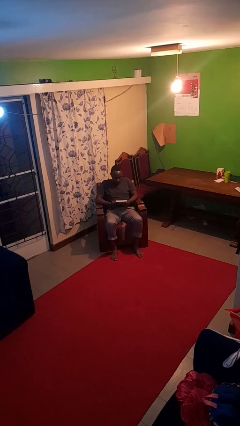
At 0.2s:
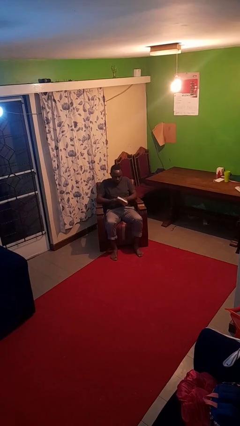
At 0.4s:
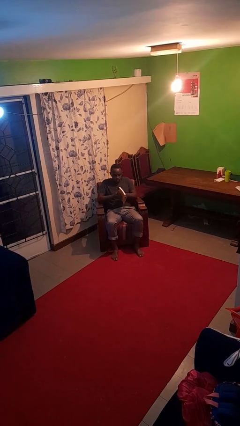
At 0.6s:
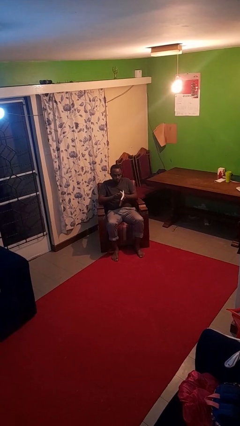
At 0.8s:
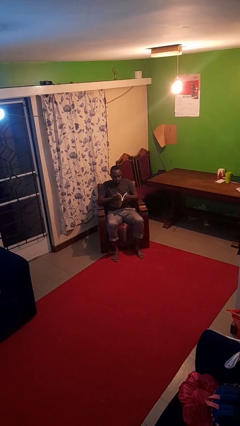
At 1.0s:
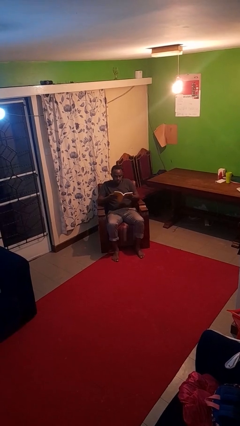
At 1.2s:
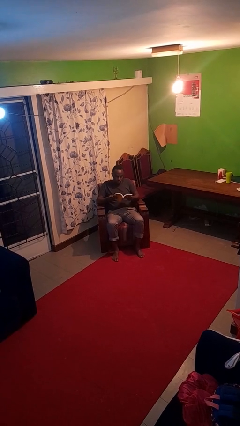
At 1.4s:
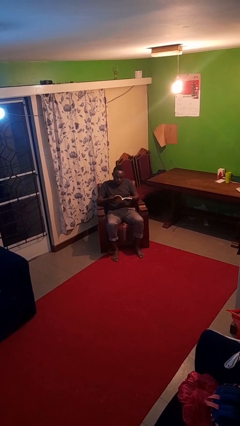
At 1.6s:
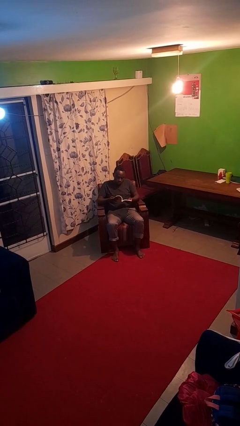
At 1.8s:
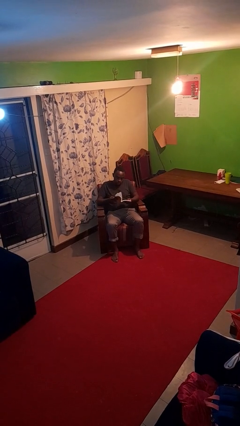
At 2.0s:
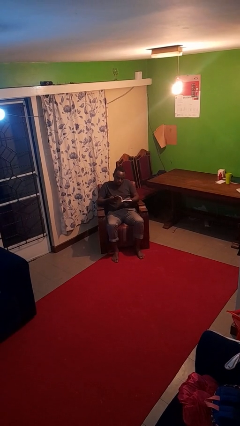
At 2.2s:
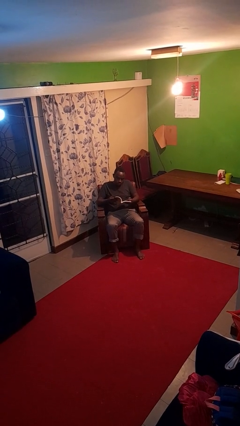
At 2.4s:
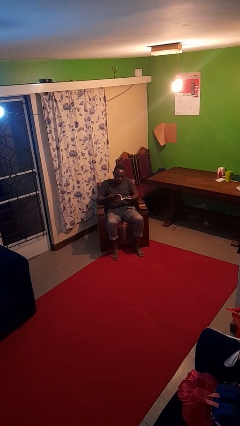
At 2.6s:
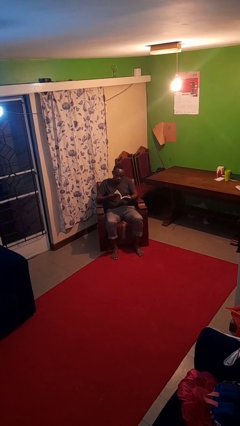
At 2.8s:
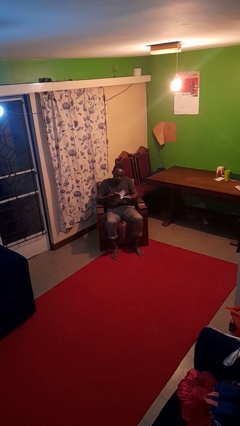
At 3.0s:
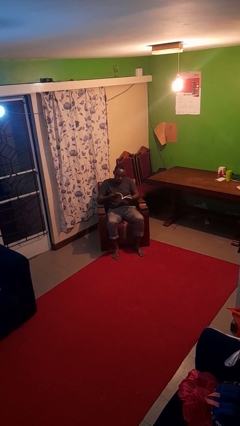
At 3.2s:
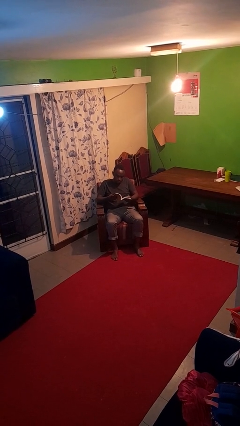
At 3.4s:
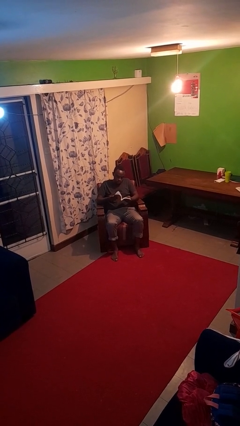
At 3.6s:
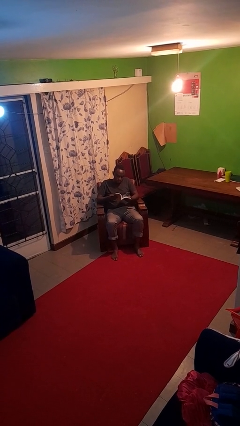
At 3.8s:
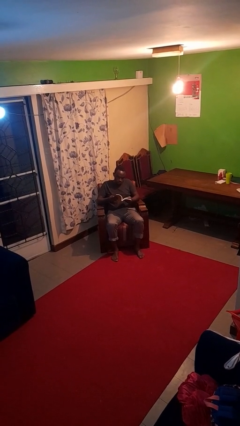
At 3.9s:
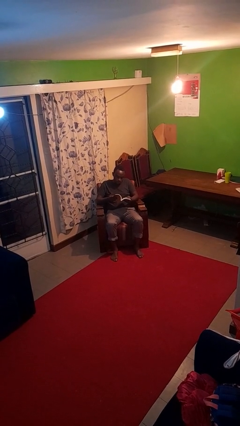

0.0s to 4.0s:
person reads book

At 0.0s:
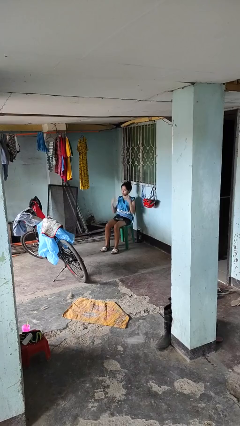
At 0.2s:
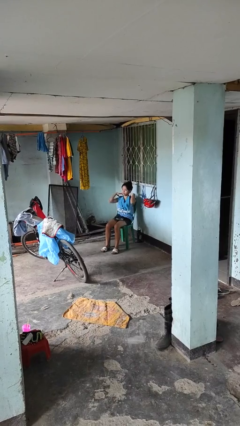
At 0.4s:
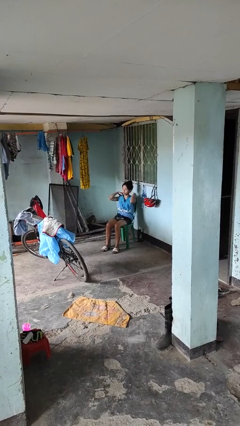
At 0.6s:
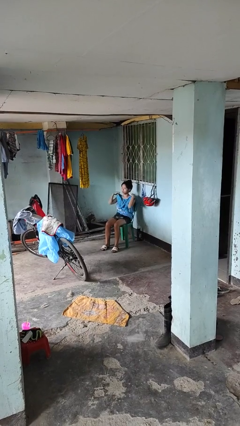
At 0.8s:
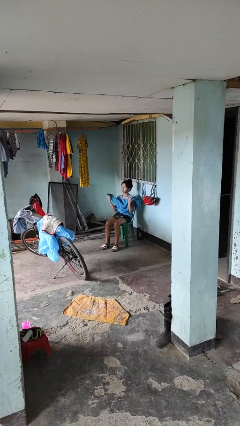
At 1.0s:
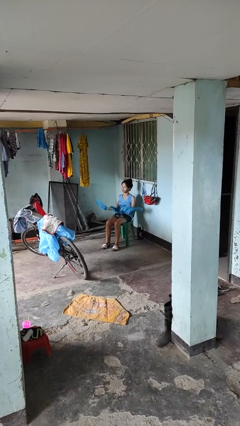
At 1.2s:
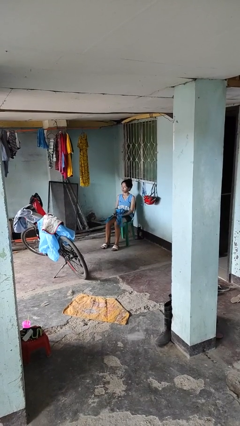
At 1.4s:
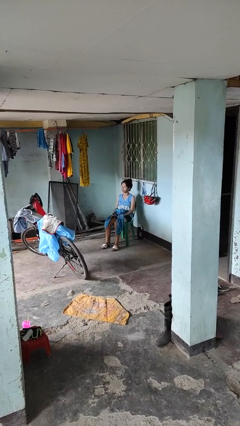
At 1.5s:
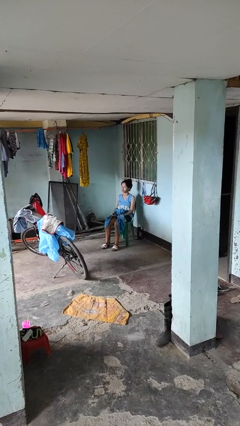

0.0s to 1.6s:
person takes off scarf

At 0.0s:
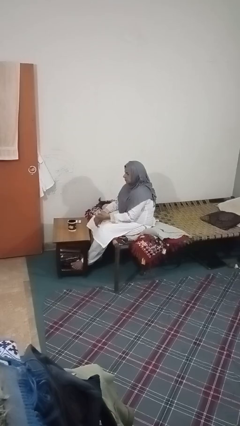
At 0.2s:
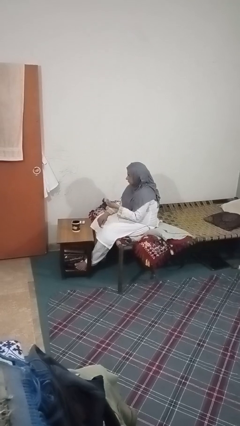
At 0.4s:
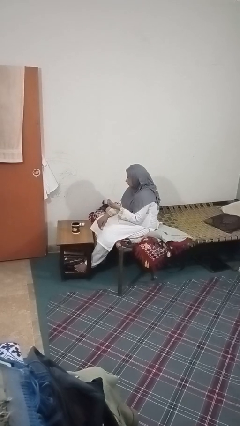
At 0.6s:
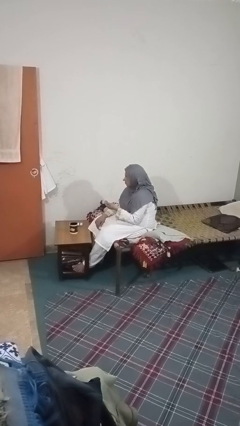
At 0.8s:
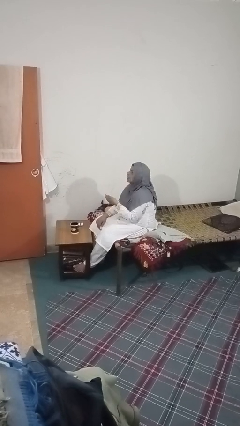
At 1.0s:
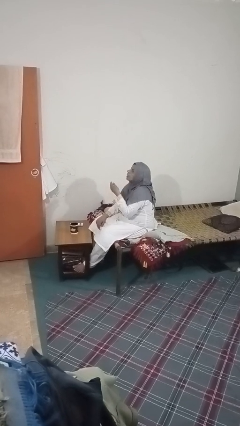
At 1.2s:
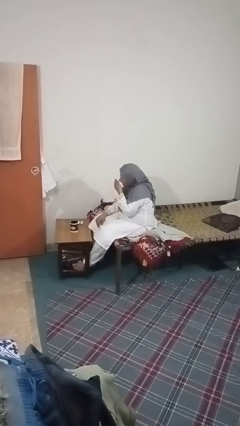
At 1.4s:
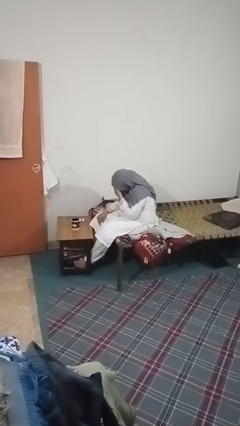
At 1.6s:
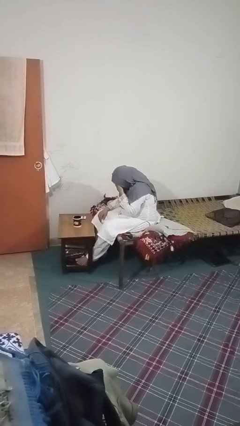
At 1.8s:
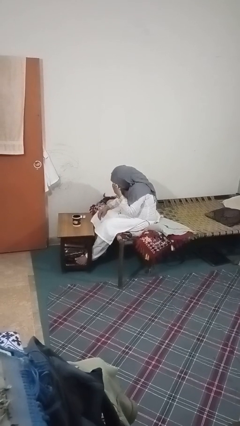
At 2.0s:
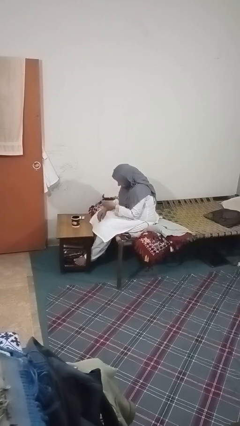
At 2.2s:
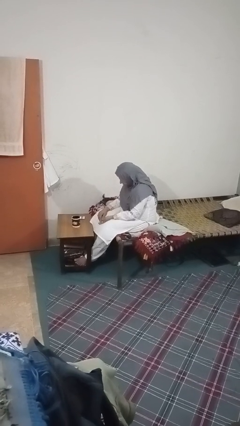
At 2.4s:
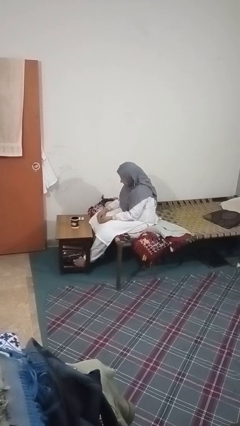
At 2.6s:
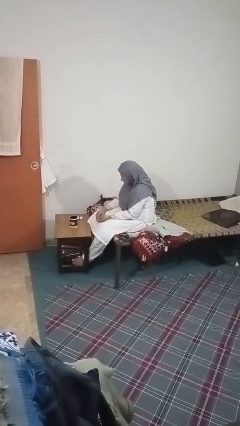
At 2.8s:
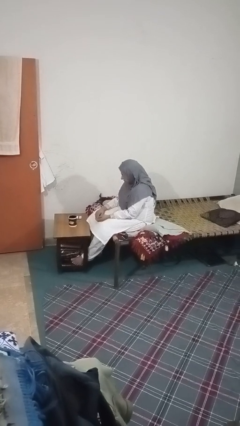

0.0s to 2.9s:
person sneezes into hand

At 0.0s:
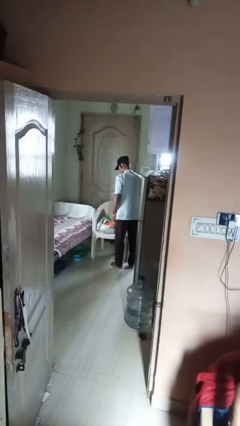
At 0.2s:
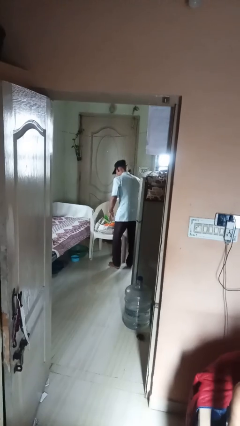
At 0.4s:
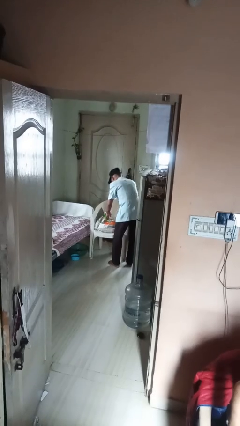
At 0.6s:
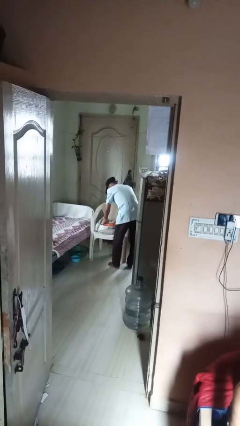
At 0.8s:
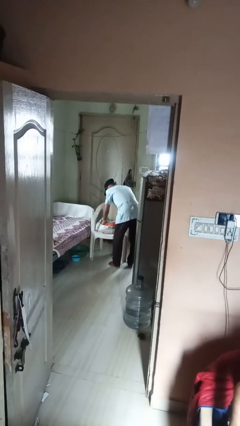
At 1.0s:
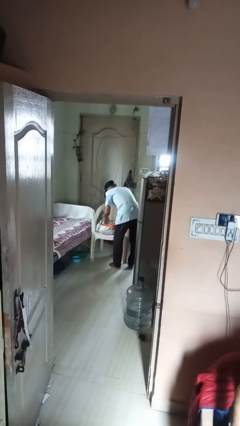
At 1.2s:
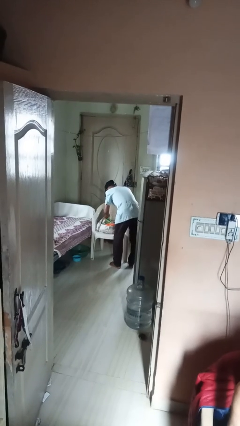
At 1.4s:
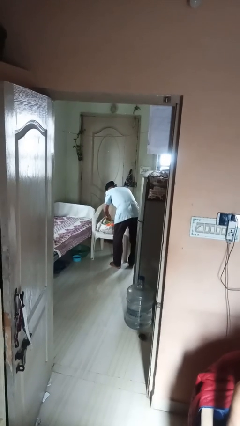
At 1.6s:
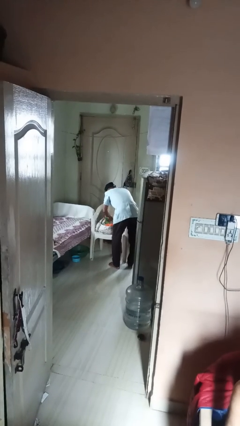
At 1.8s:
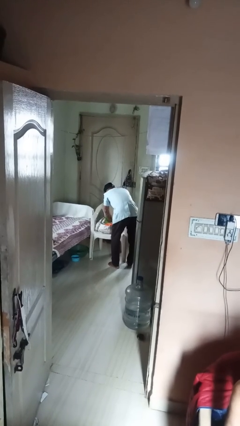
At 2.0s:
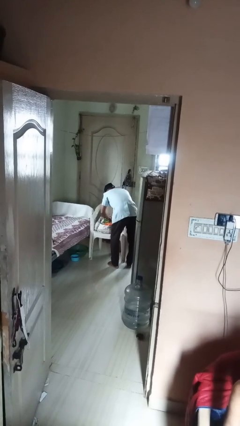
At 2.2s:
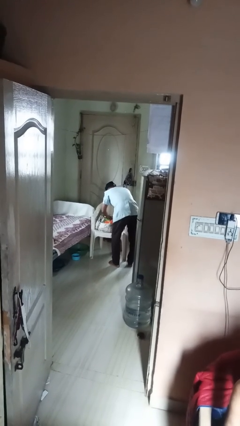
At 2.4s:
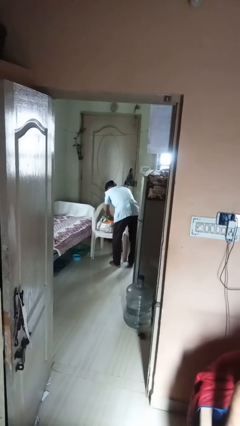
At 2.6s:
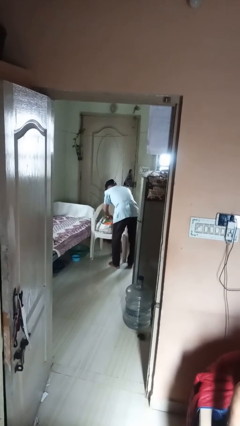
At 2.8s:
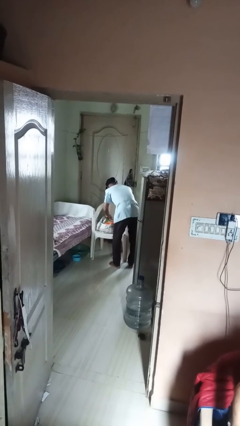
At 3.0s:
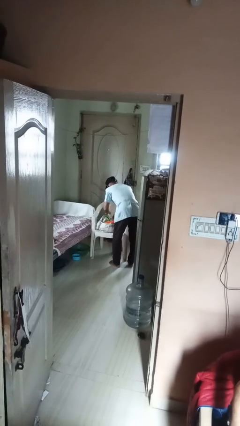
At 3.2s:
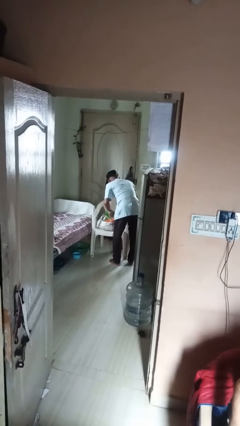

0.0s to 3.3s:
person searches in bag

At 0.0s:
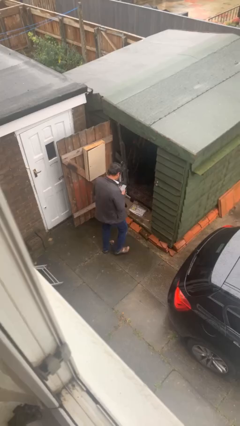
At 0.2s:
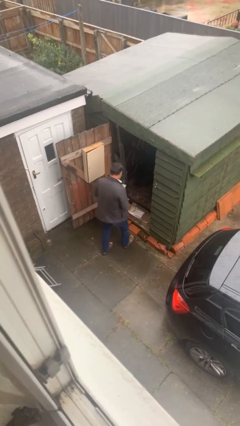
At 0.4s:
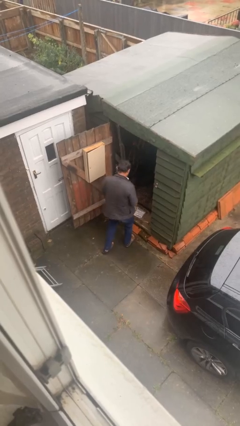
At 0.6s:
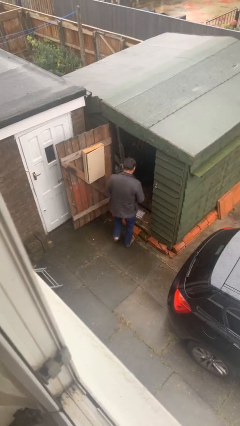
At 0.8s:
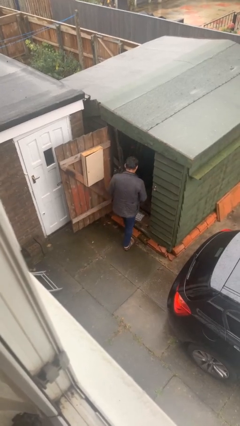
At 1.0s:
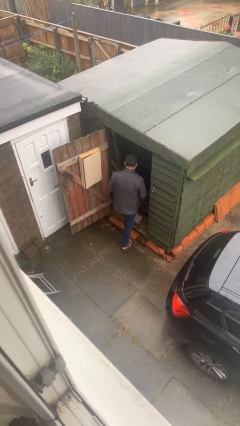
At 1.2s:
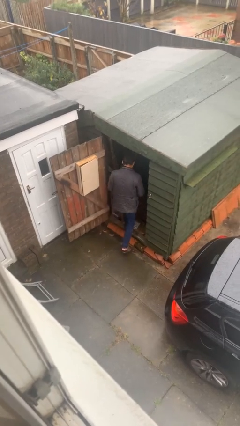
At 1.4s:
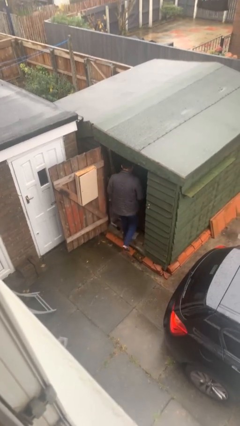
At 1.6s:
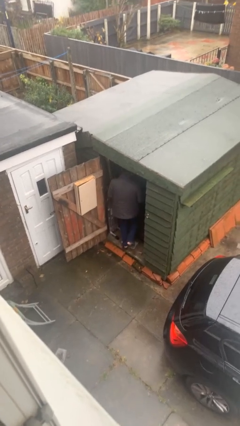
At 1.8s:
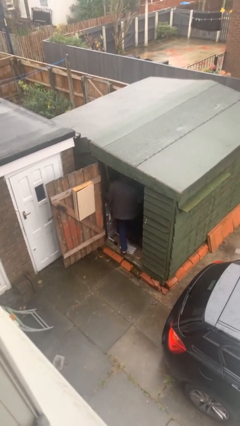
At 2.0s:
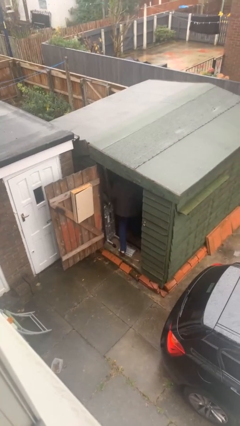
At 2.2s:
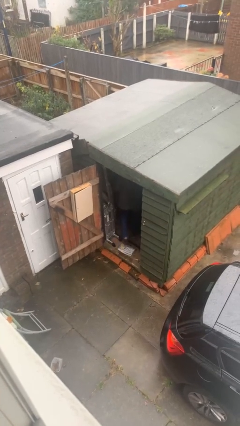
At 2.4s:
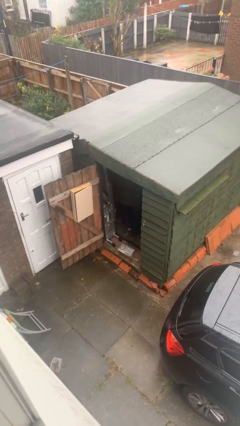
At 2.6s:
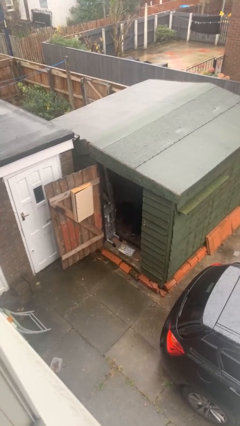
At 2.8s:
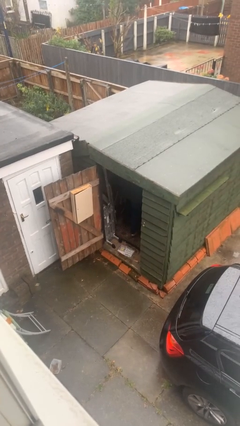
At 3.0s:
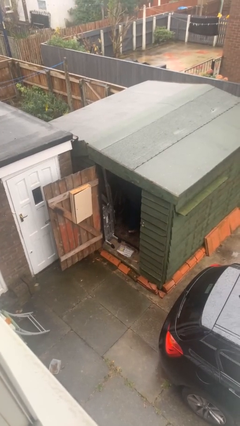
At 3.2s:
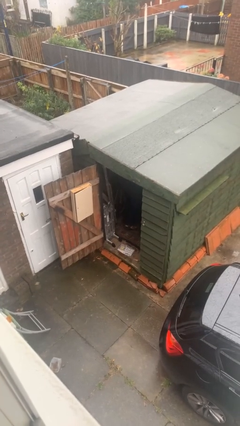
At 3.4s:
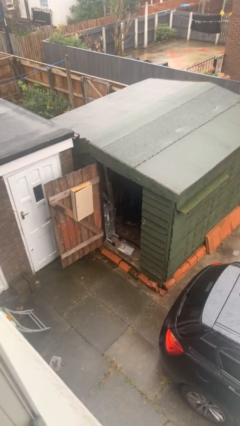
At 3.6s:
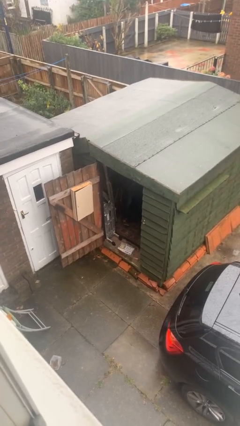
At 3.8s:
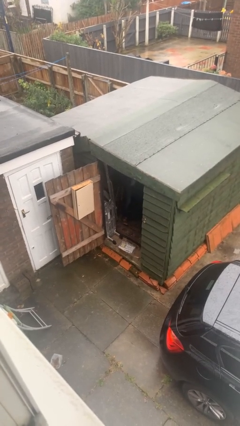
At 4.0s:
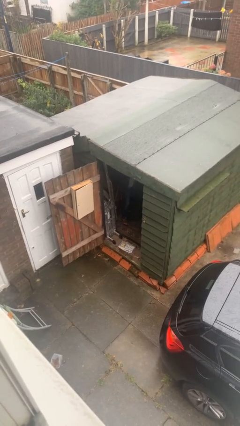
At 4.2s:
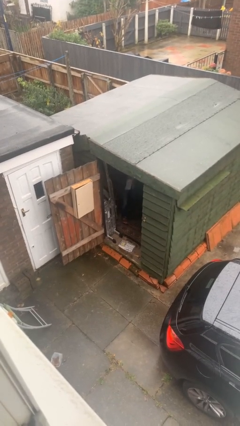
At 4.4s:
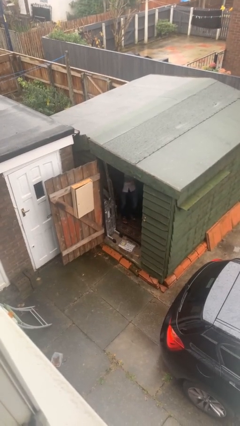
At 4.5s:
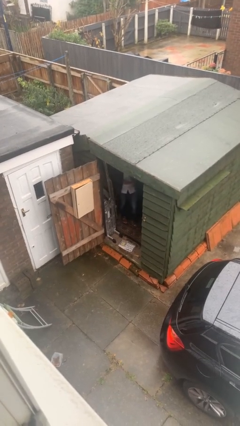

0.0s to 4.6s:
person exits scene through structure

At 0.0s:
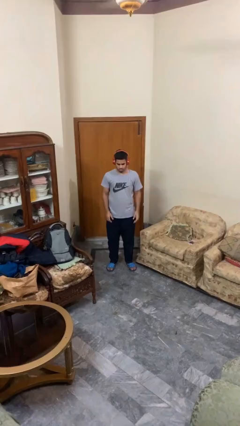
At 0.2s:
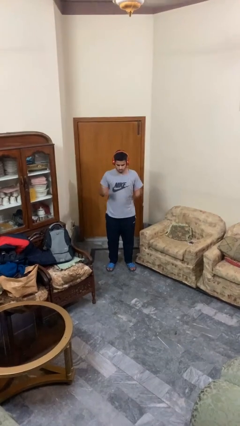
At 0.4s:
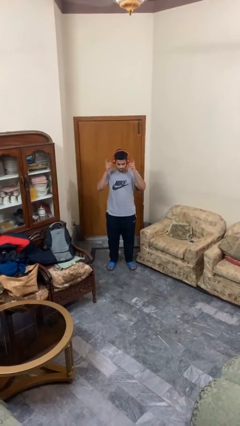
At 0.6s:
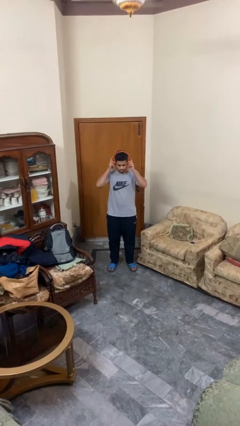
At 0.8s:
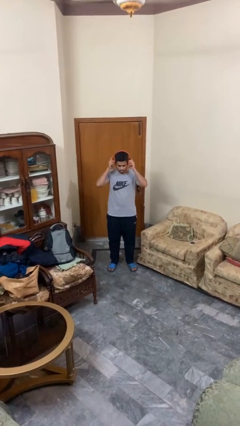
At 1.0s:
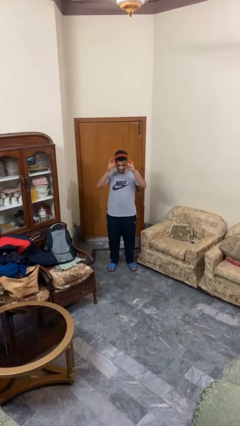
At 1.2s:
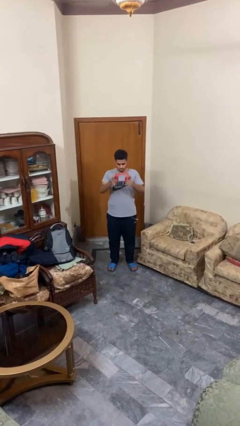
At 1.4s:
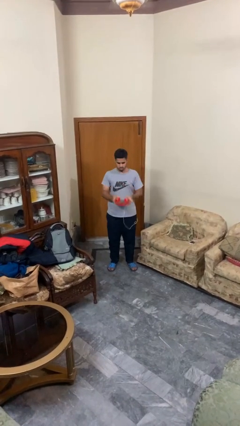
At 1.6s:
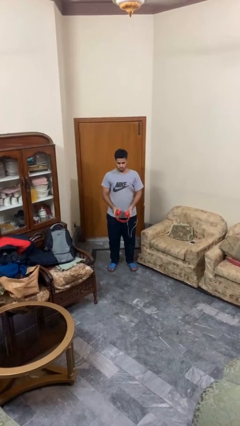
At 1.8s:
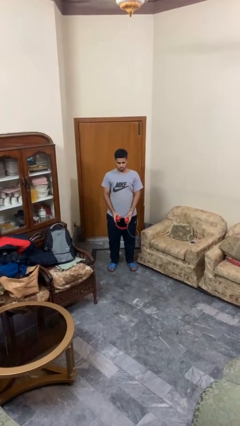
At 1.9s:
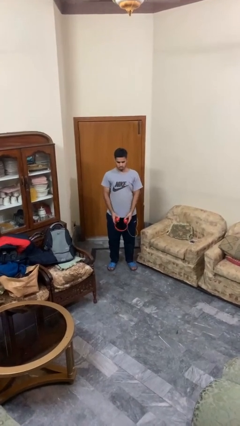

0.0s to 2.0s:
person takes off headphones
